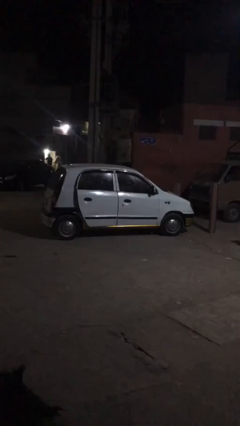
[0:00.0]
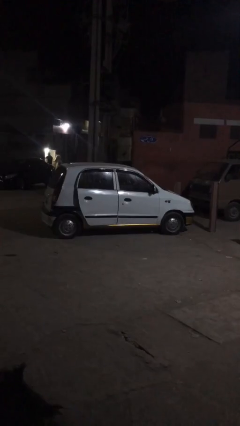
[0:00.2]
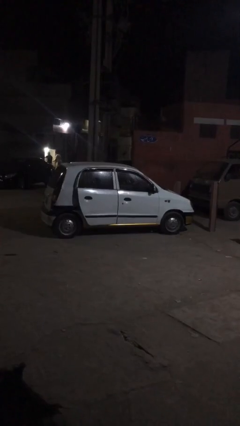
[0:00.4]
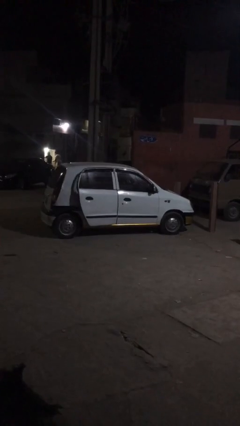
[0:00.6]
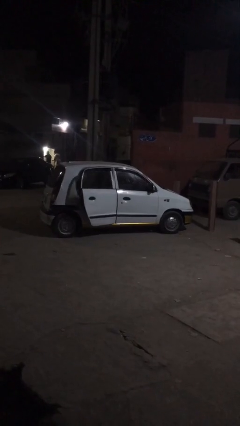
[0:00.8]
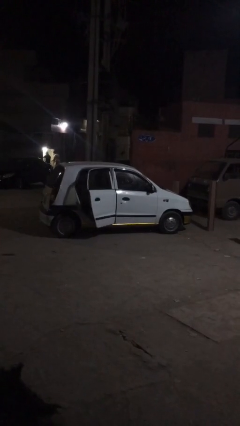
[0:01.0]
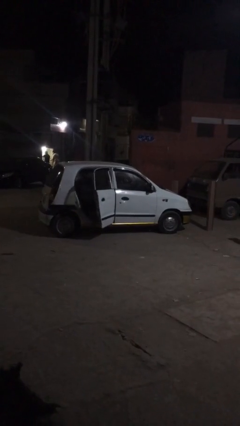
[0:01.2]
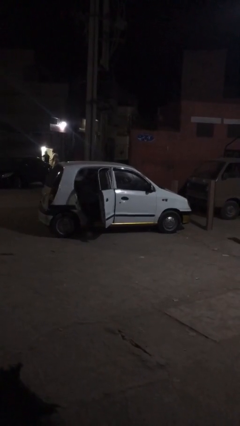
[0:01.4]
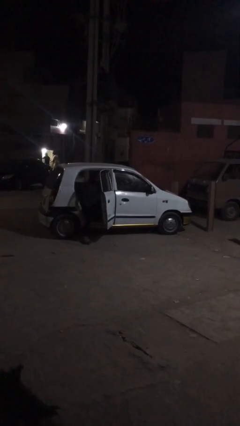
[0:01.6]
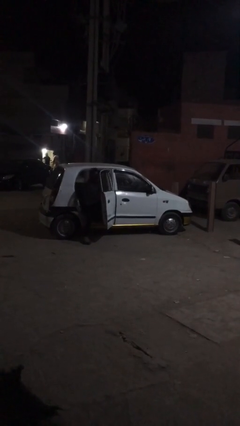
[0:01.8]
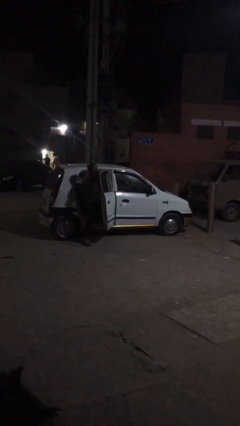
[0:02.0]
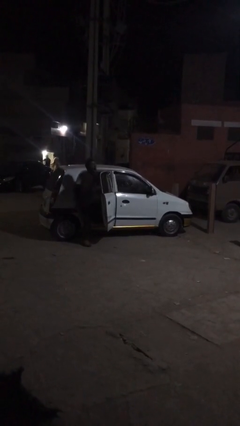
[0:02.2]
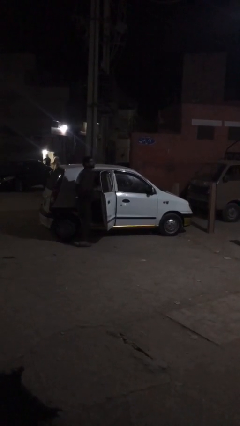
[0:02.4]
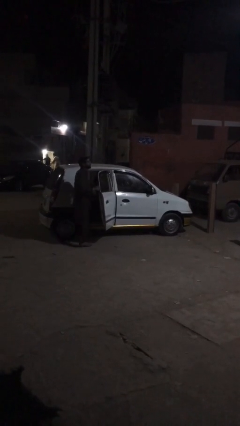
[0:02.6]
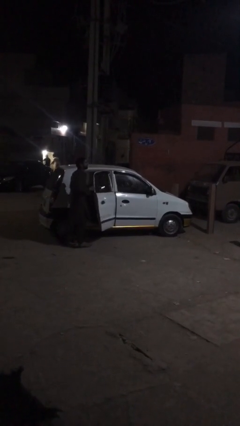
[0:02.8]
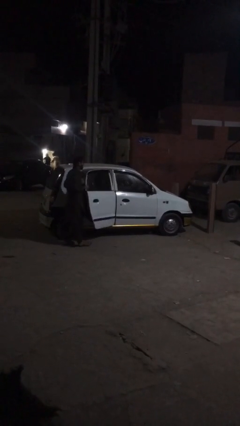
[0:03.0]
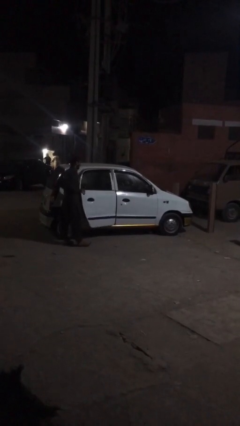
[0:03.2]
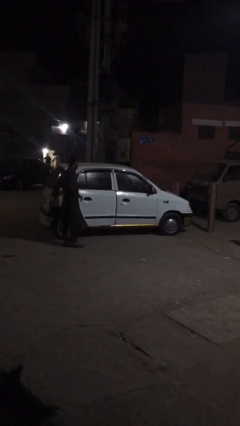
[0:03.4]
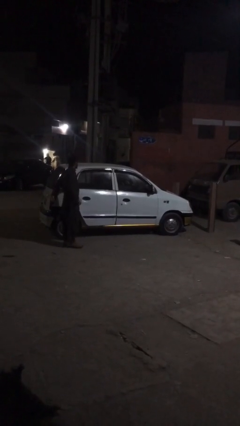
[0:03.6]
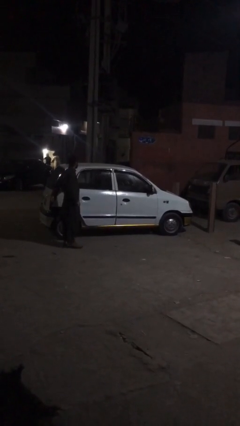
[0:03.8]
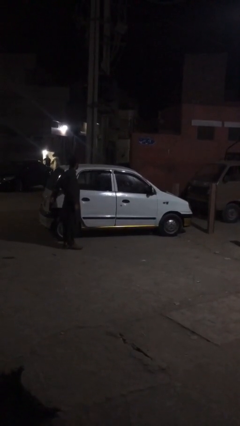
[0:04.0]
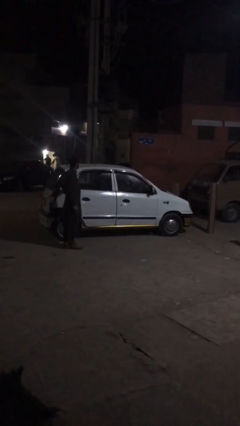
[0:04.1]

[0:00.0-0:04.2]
car drops off person

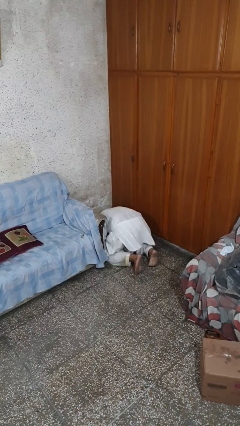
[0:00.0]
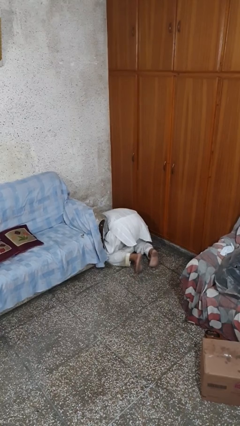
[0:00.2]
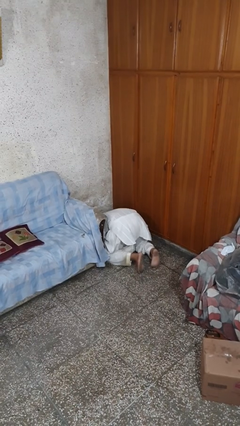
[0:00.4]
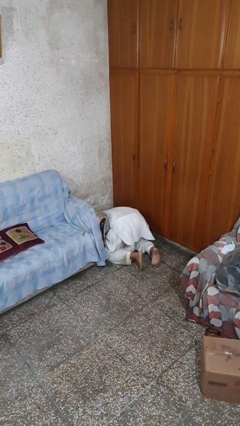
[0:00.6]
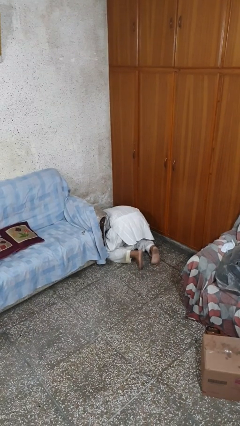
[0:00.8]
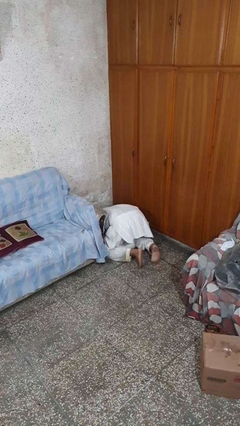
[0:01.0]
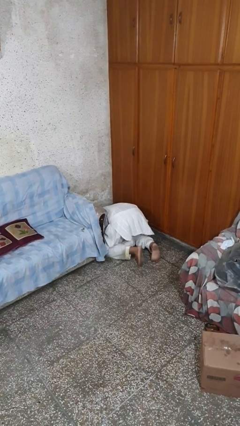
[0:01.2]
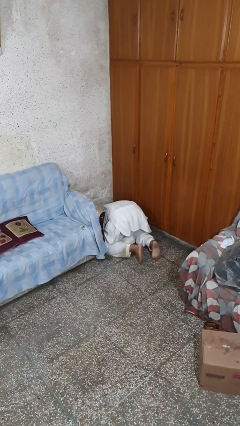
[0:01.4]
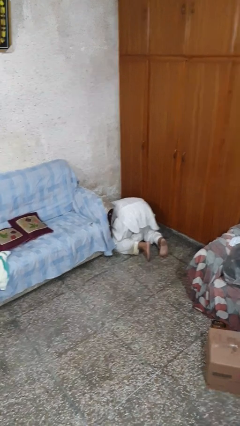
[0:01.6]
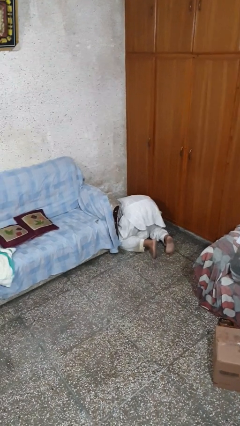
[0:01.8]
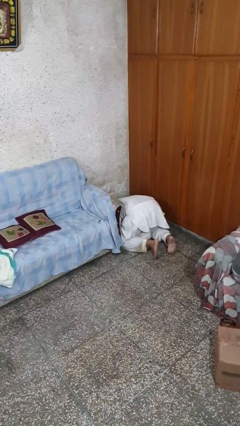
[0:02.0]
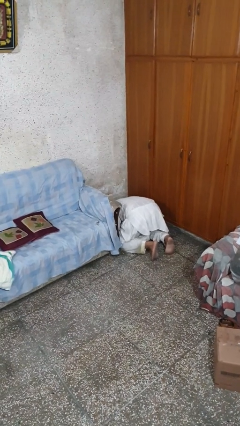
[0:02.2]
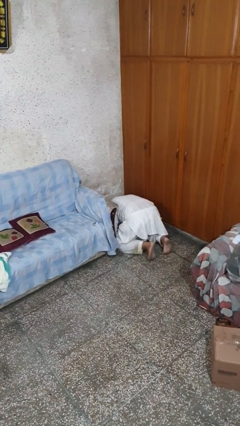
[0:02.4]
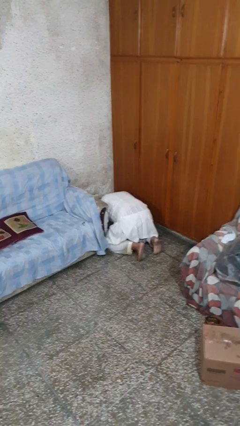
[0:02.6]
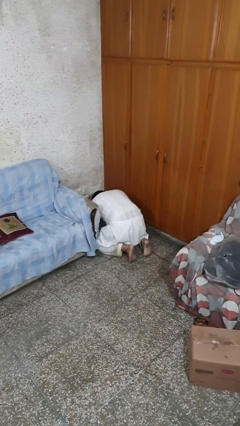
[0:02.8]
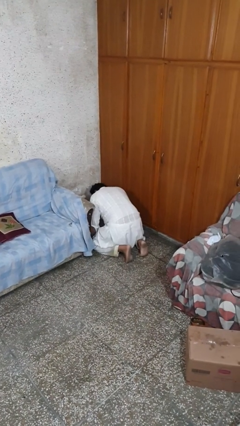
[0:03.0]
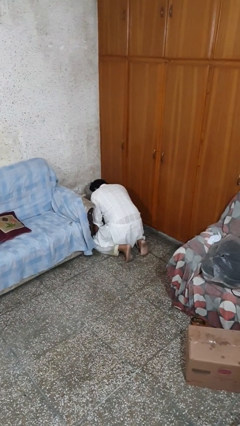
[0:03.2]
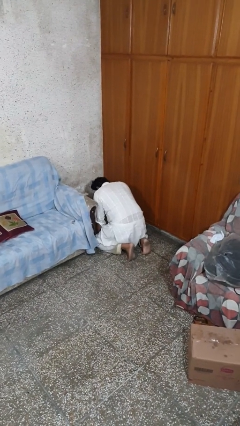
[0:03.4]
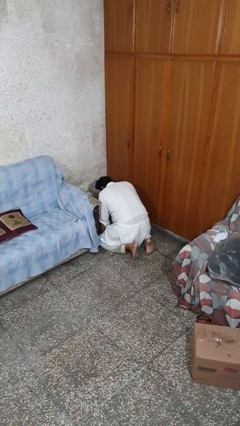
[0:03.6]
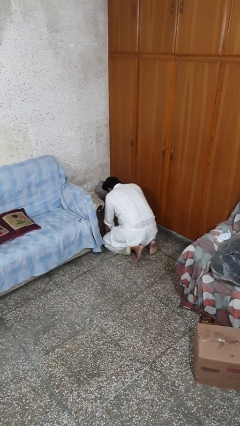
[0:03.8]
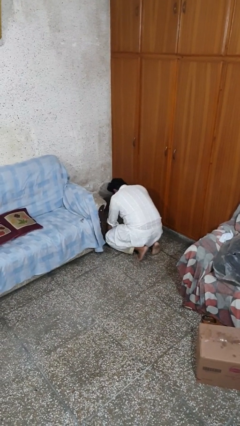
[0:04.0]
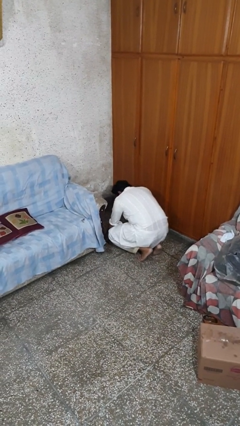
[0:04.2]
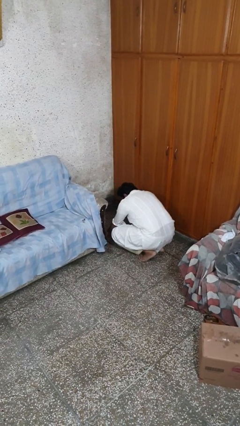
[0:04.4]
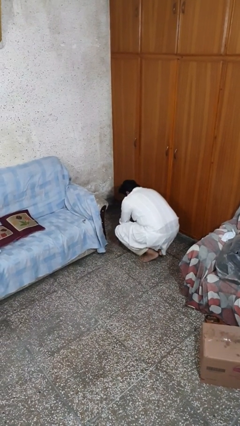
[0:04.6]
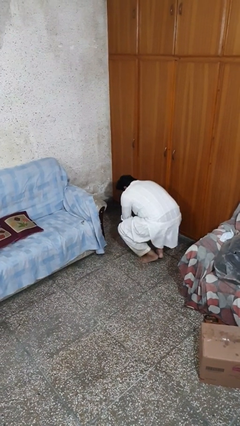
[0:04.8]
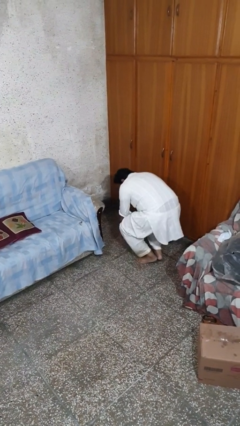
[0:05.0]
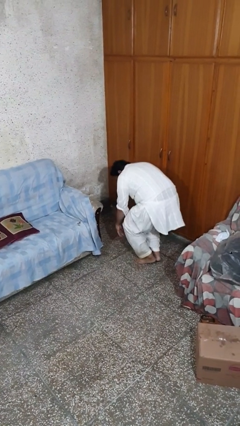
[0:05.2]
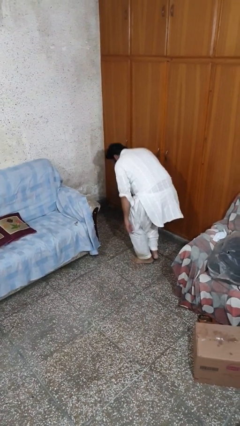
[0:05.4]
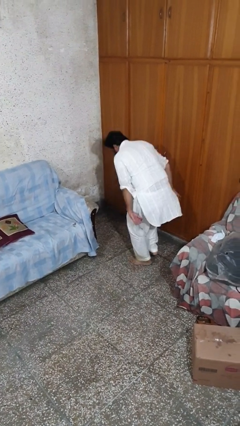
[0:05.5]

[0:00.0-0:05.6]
person searches under couch

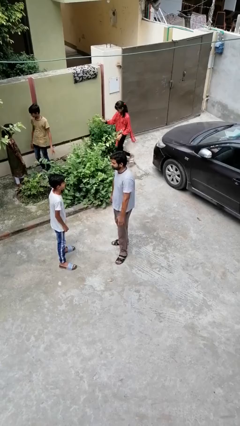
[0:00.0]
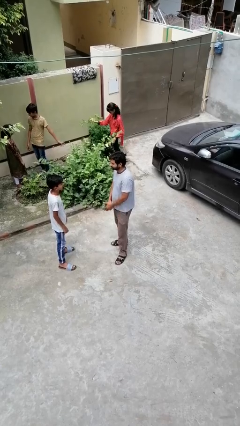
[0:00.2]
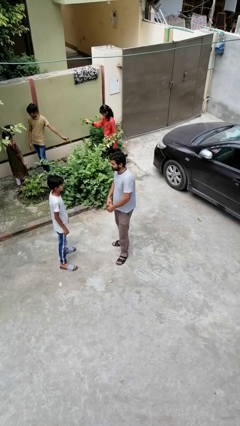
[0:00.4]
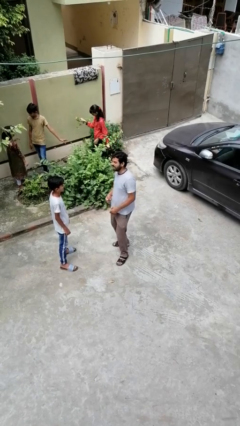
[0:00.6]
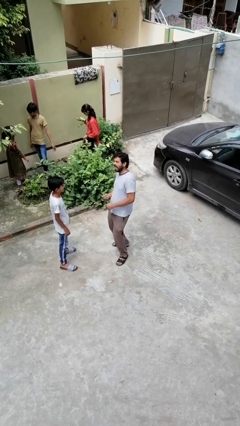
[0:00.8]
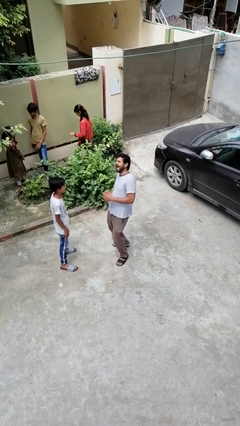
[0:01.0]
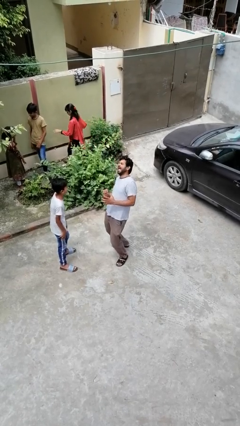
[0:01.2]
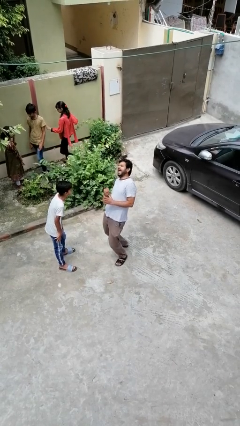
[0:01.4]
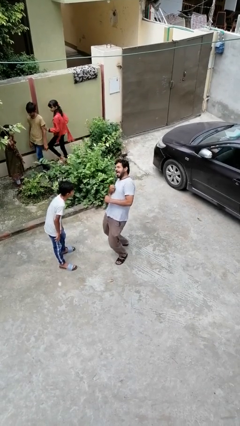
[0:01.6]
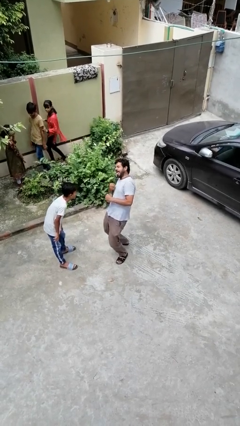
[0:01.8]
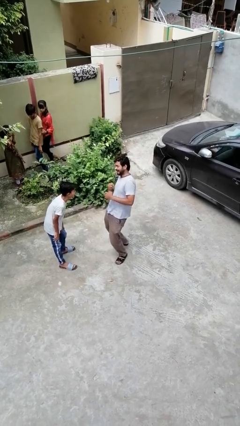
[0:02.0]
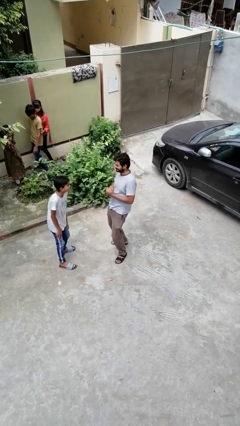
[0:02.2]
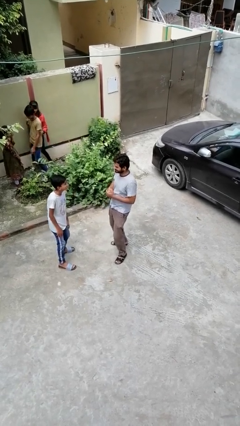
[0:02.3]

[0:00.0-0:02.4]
person laughs with person

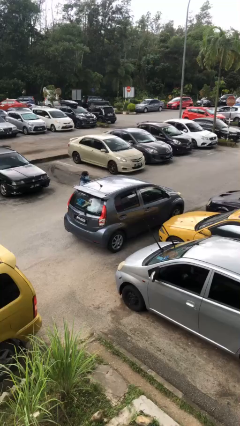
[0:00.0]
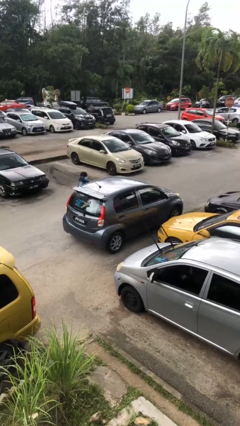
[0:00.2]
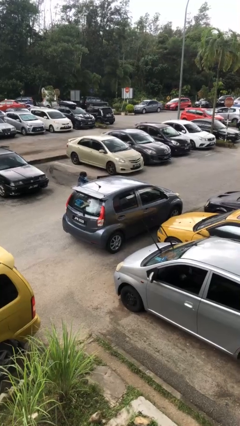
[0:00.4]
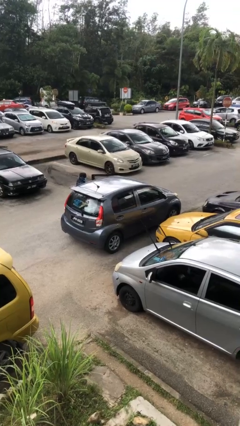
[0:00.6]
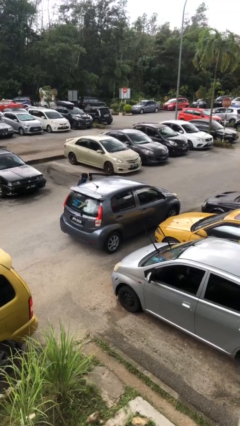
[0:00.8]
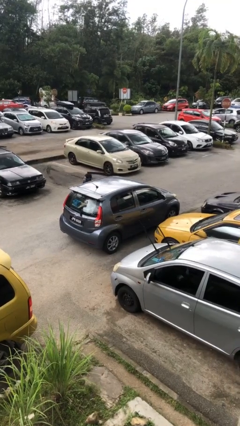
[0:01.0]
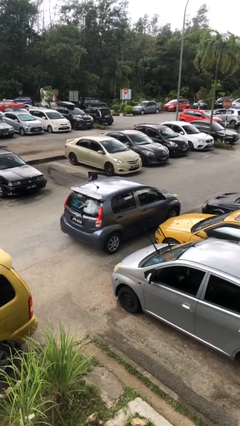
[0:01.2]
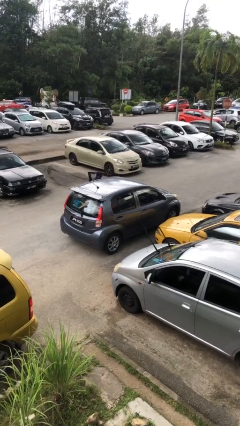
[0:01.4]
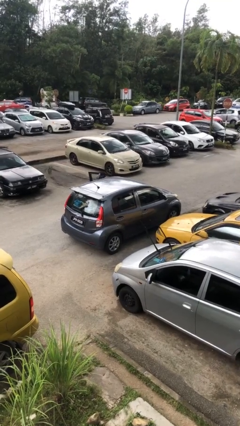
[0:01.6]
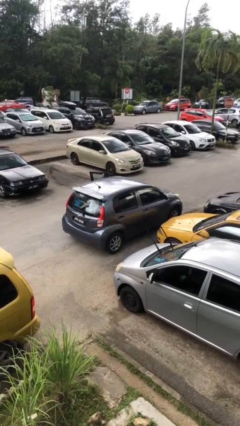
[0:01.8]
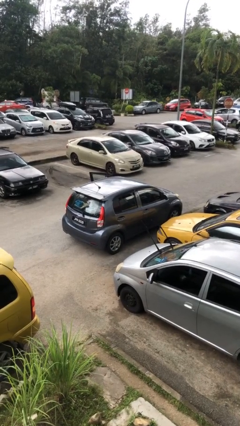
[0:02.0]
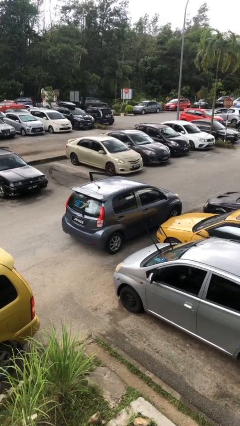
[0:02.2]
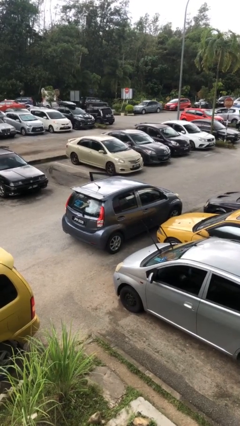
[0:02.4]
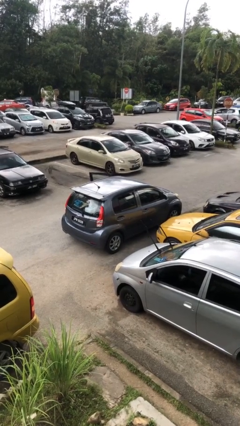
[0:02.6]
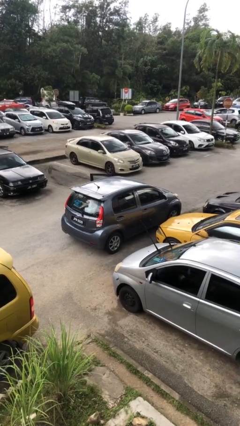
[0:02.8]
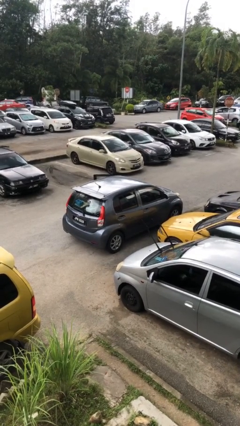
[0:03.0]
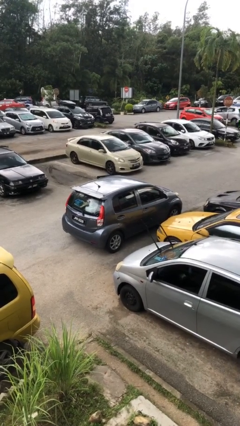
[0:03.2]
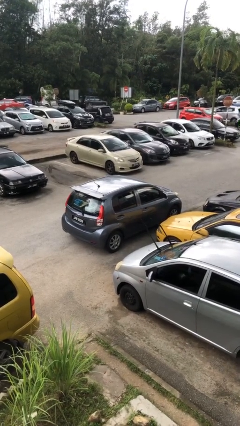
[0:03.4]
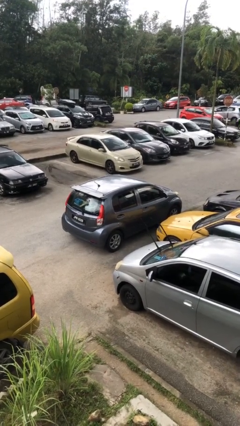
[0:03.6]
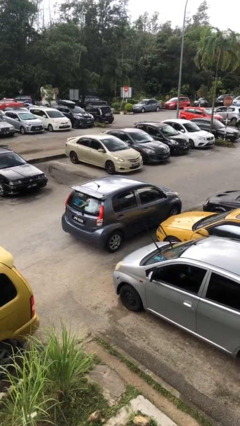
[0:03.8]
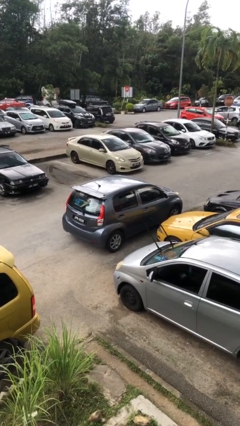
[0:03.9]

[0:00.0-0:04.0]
car picks up person

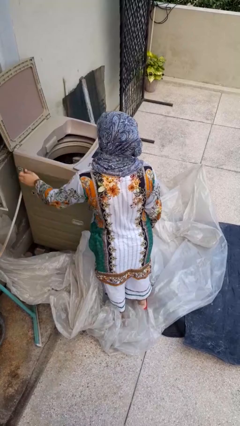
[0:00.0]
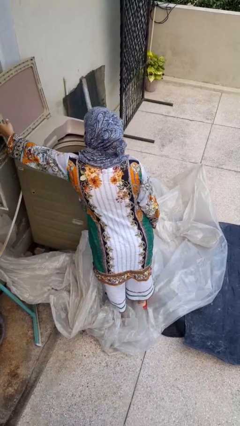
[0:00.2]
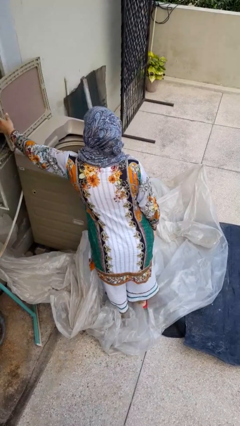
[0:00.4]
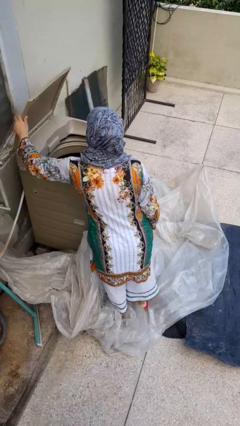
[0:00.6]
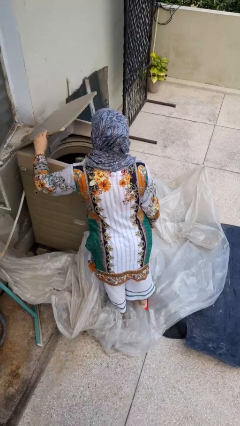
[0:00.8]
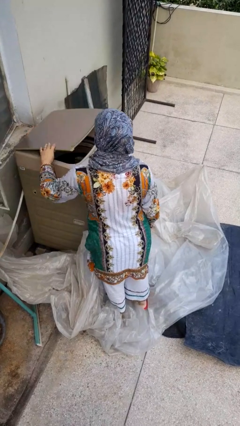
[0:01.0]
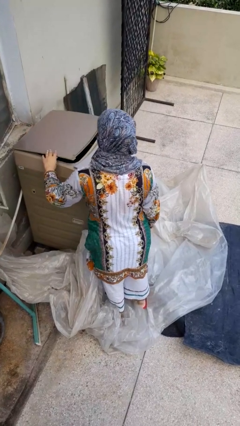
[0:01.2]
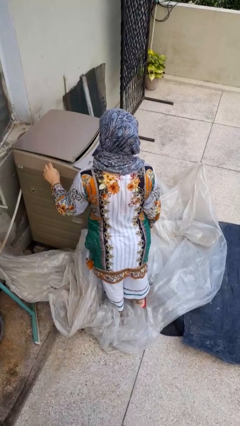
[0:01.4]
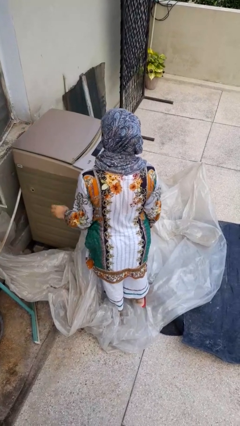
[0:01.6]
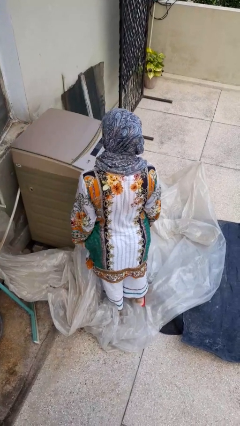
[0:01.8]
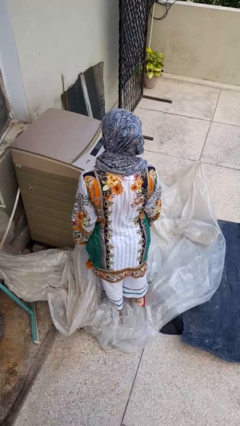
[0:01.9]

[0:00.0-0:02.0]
person closes clothes washer
